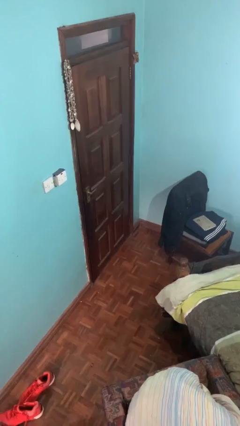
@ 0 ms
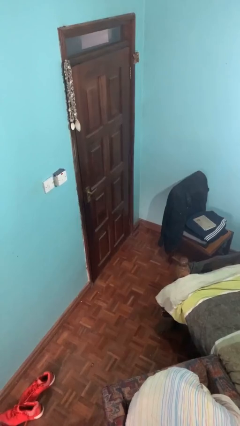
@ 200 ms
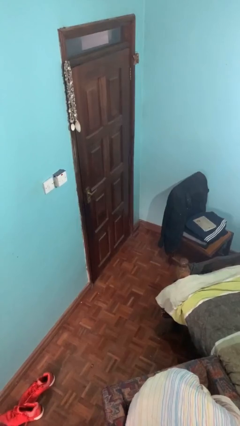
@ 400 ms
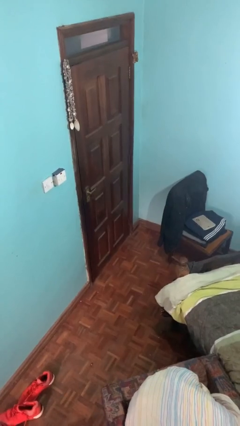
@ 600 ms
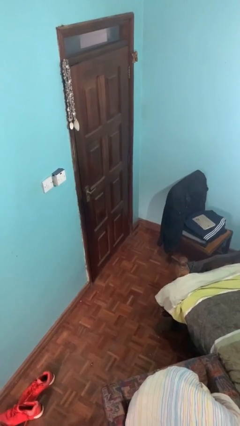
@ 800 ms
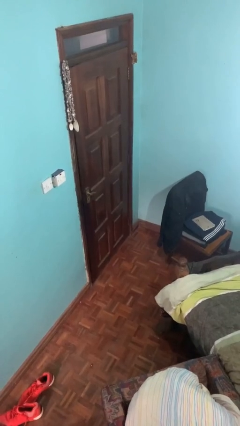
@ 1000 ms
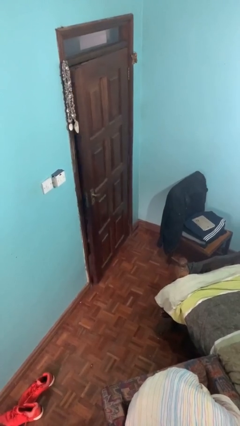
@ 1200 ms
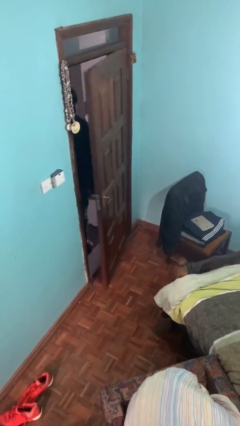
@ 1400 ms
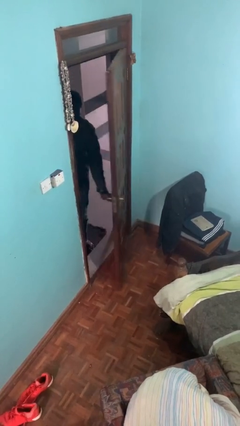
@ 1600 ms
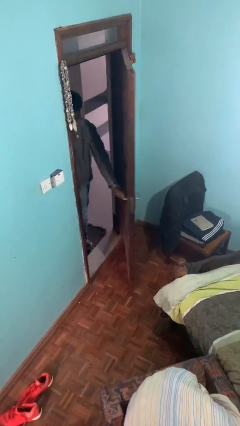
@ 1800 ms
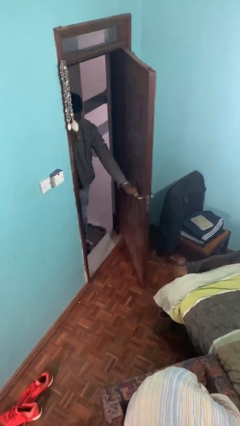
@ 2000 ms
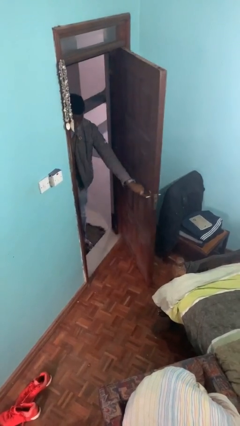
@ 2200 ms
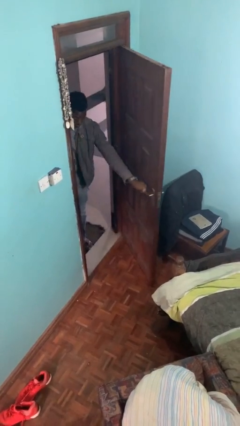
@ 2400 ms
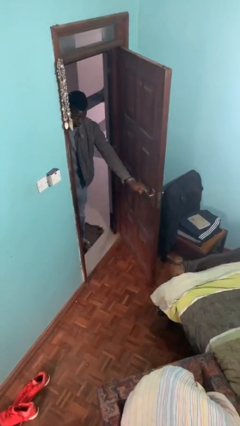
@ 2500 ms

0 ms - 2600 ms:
person opens facility door

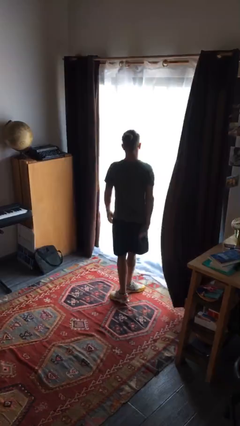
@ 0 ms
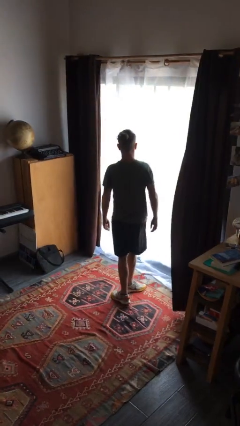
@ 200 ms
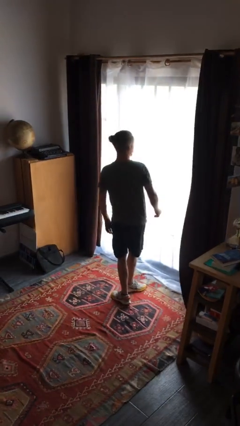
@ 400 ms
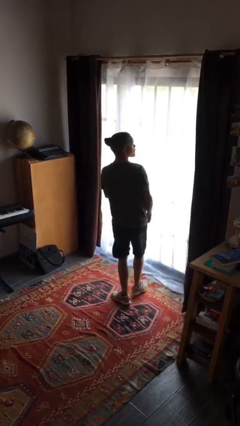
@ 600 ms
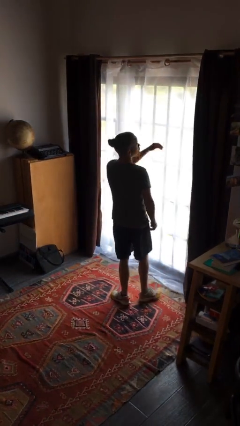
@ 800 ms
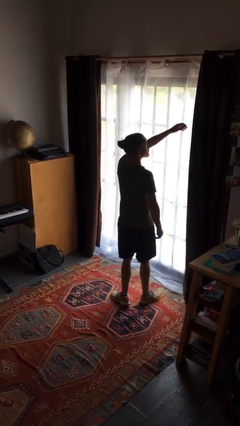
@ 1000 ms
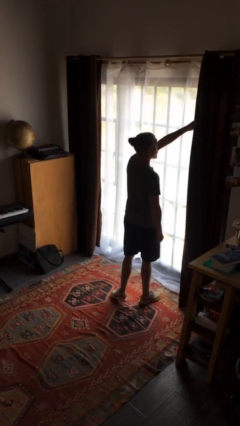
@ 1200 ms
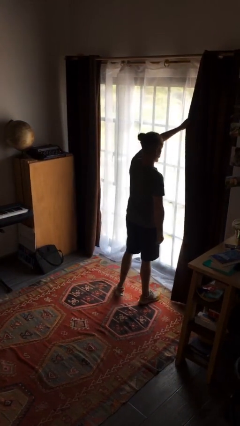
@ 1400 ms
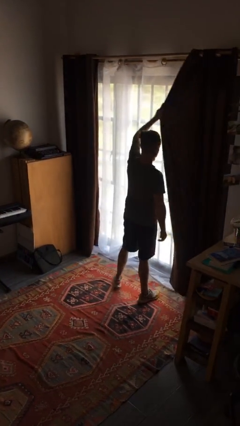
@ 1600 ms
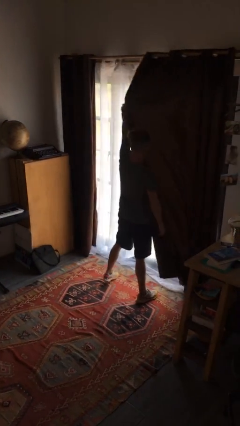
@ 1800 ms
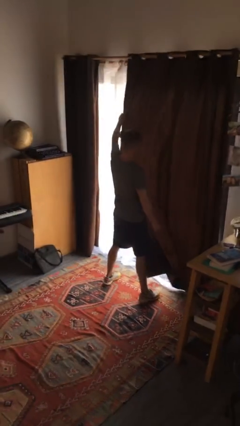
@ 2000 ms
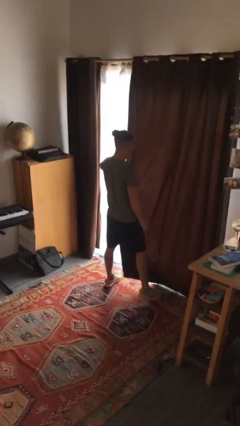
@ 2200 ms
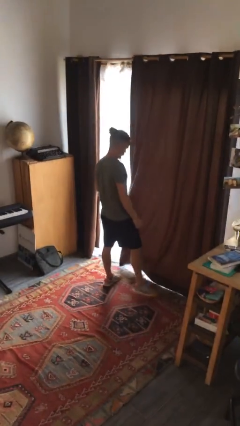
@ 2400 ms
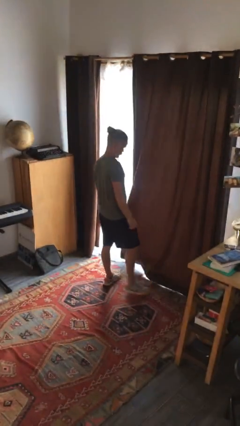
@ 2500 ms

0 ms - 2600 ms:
person closes curtains

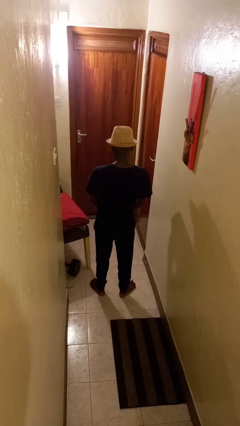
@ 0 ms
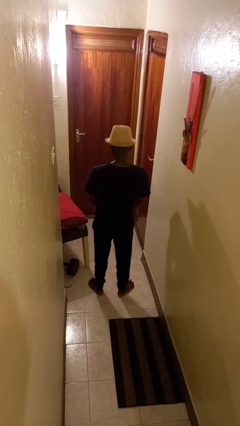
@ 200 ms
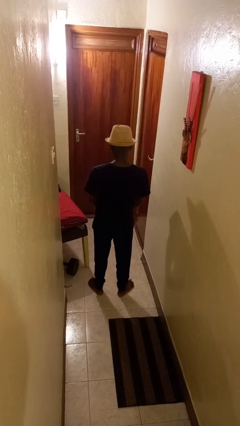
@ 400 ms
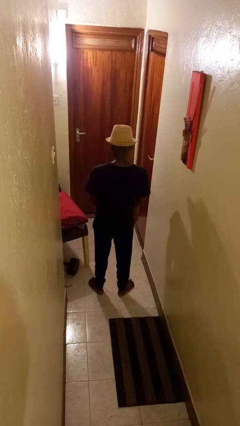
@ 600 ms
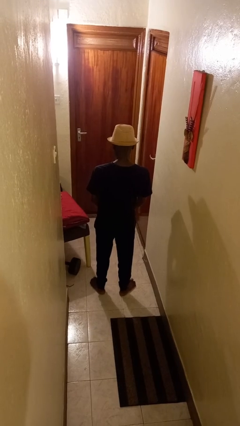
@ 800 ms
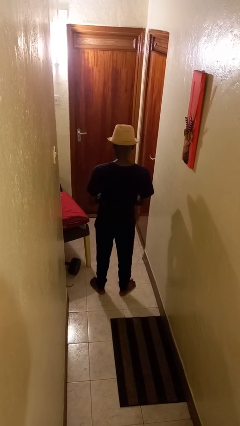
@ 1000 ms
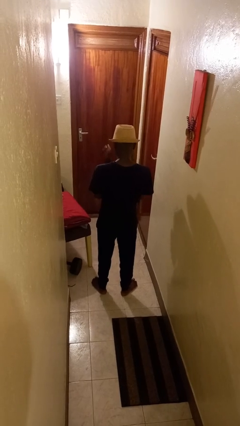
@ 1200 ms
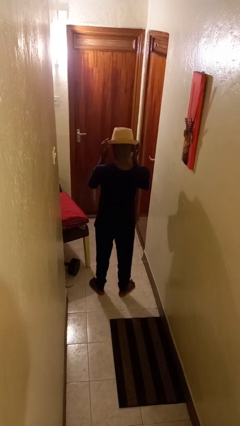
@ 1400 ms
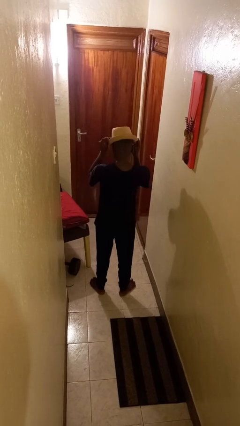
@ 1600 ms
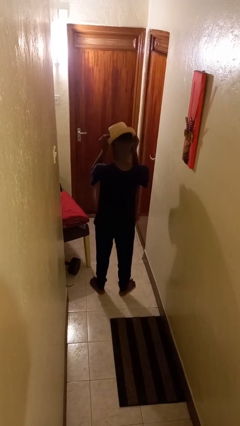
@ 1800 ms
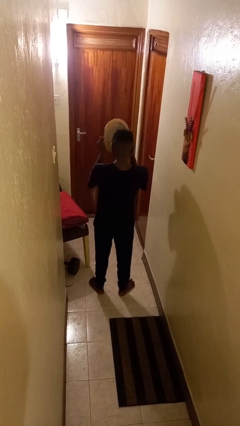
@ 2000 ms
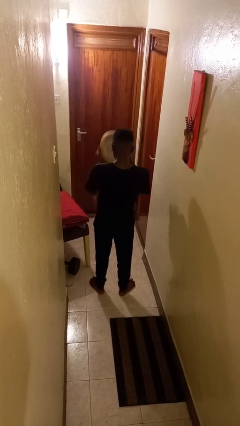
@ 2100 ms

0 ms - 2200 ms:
person takes off hat

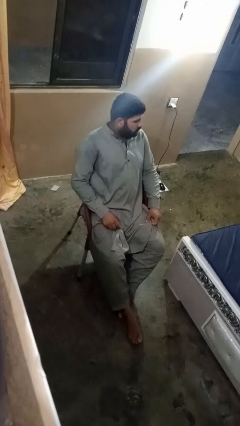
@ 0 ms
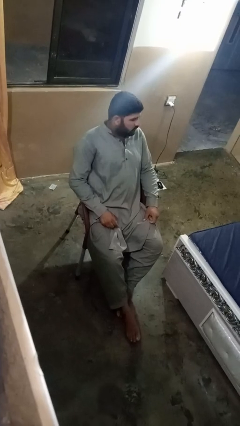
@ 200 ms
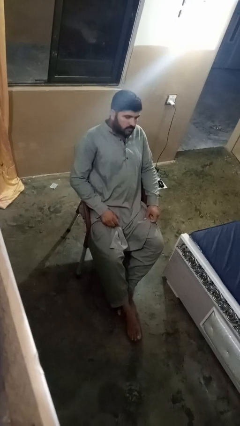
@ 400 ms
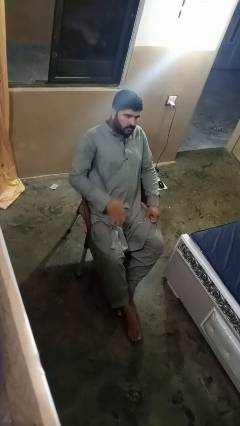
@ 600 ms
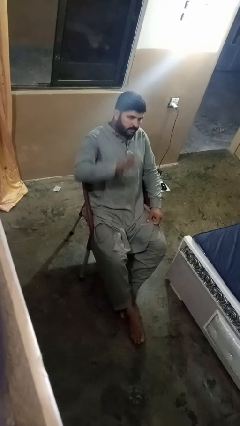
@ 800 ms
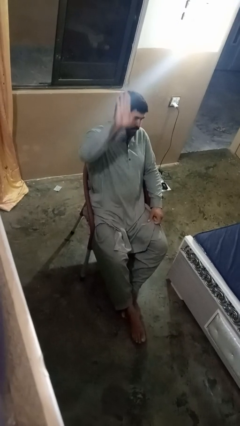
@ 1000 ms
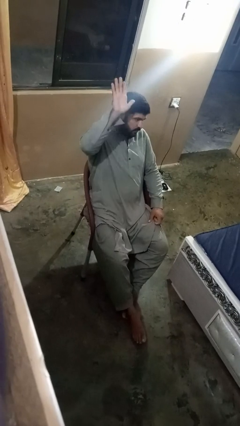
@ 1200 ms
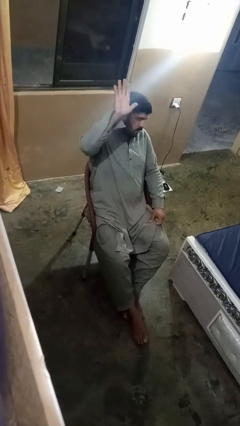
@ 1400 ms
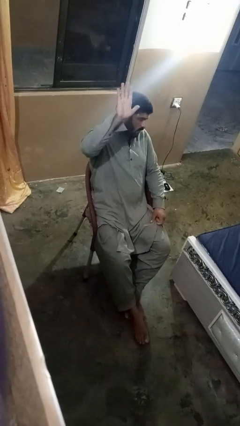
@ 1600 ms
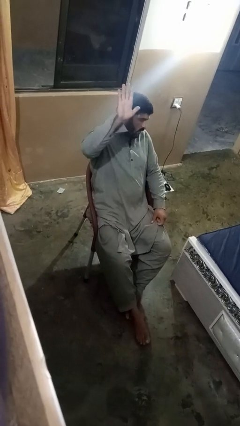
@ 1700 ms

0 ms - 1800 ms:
person gestures number five

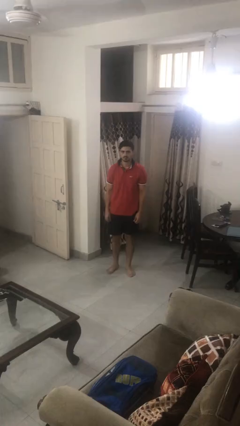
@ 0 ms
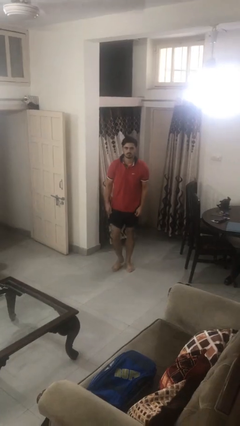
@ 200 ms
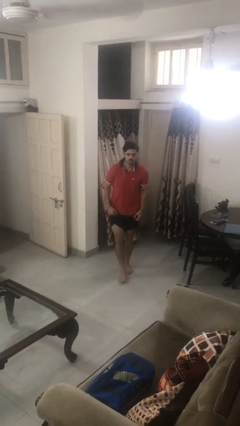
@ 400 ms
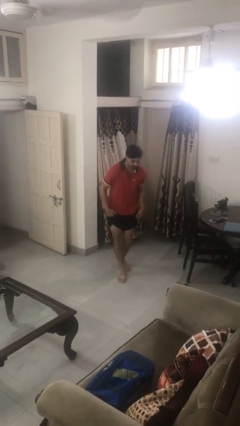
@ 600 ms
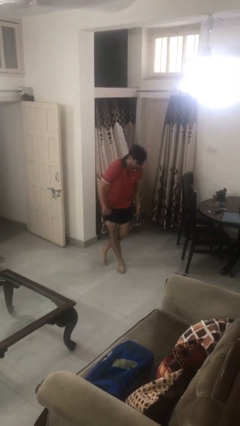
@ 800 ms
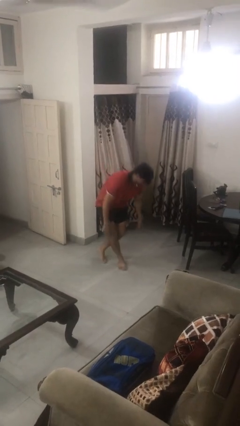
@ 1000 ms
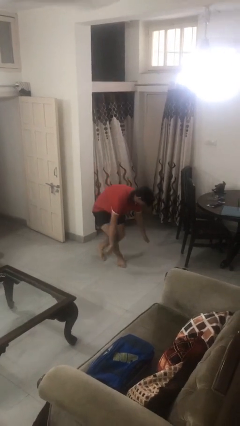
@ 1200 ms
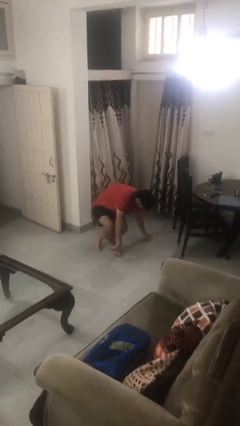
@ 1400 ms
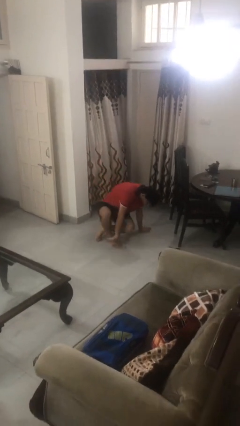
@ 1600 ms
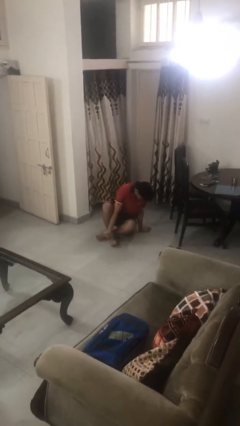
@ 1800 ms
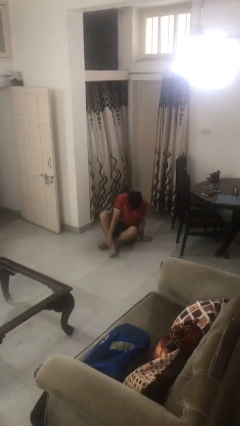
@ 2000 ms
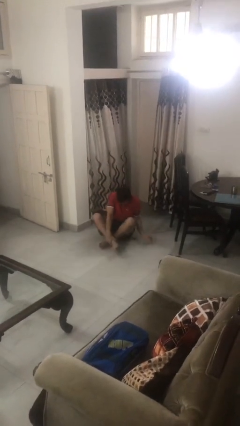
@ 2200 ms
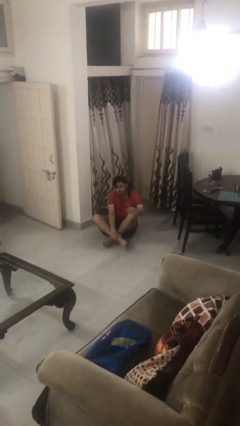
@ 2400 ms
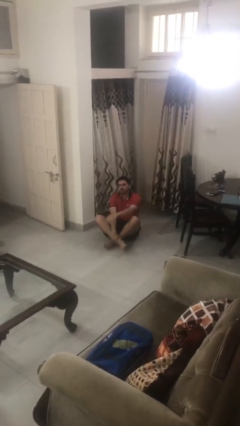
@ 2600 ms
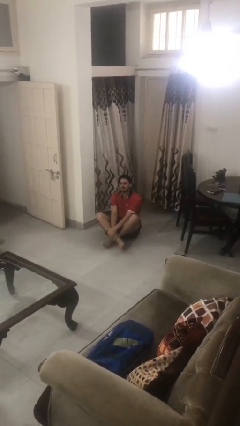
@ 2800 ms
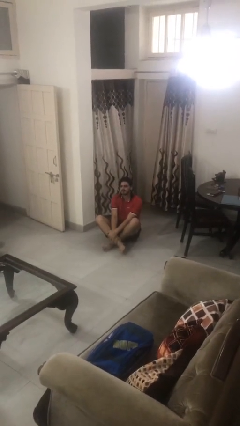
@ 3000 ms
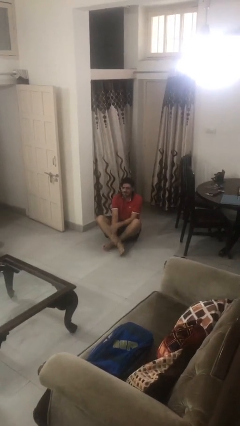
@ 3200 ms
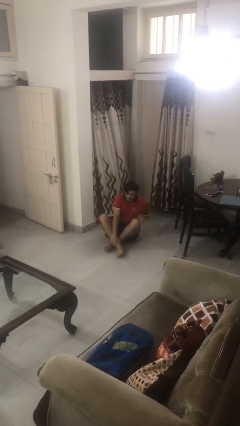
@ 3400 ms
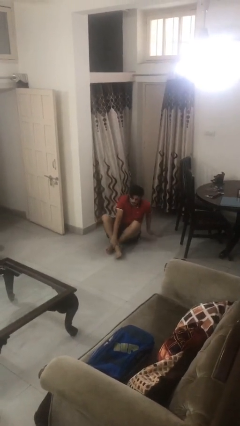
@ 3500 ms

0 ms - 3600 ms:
person sits crisscross

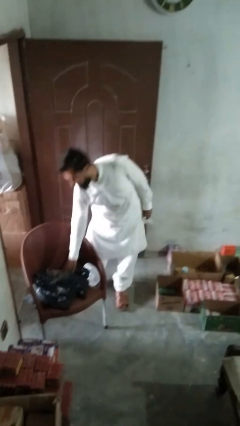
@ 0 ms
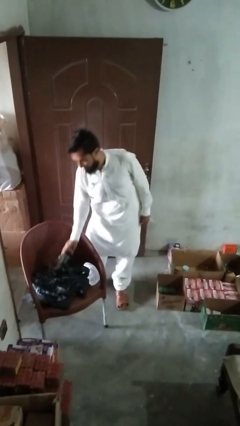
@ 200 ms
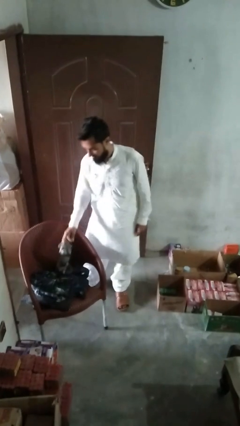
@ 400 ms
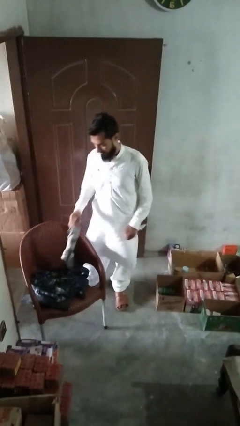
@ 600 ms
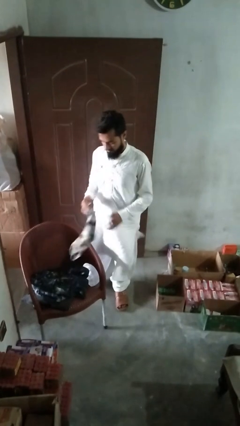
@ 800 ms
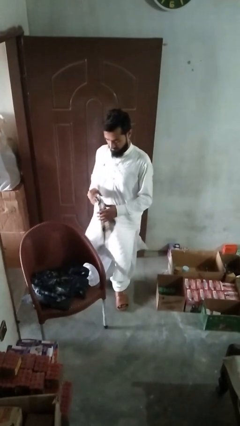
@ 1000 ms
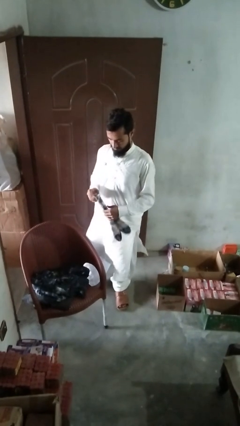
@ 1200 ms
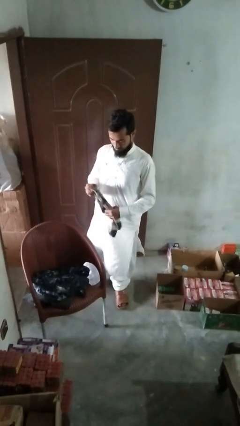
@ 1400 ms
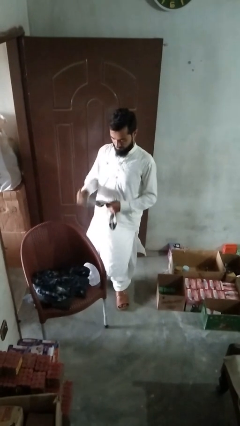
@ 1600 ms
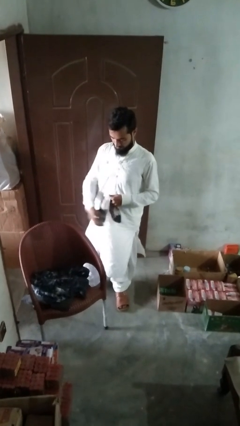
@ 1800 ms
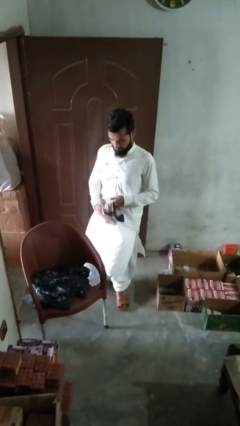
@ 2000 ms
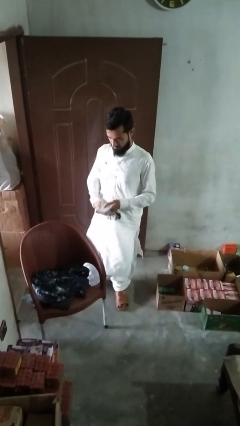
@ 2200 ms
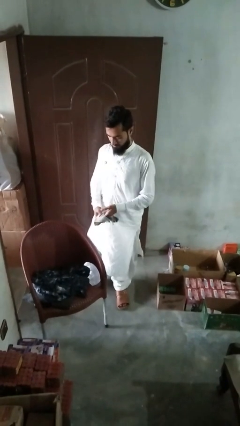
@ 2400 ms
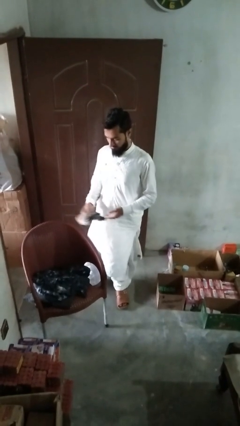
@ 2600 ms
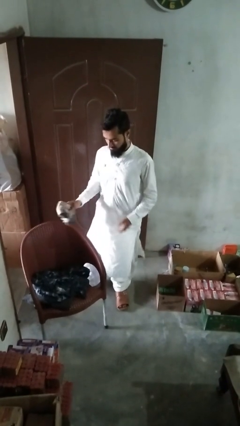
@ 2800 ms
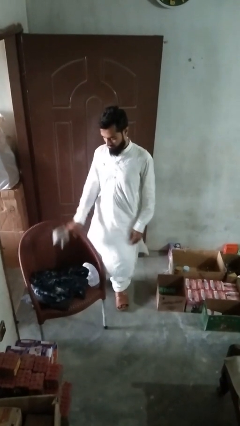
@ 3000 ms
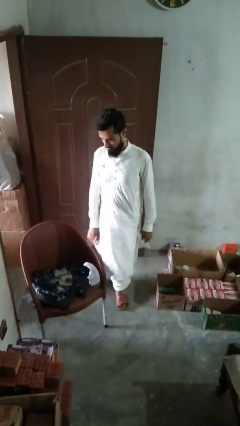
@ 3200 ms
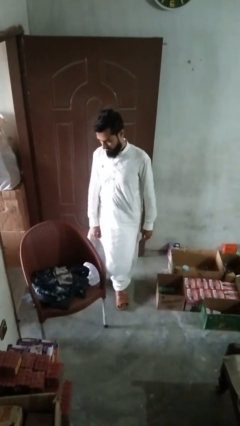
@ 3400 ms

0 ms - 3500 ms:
person folds socks

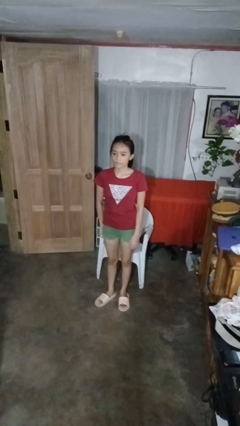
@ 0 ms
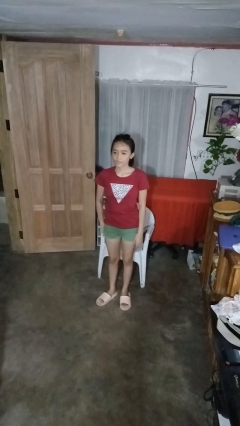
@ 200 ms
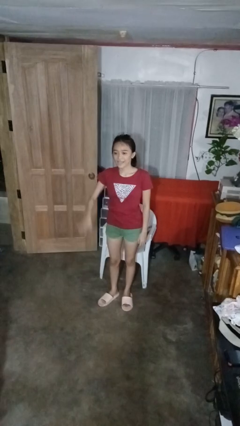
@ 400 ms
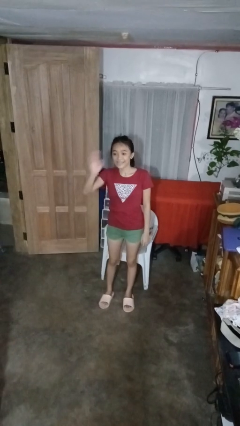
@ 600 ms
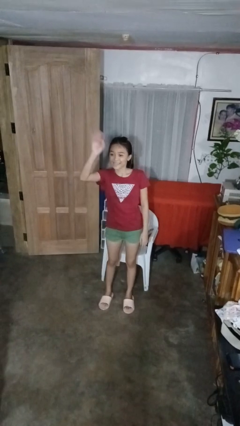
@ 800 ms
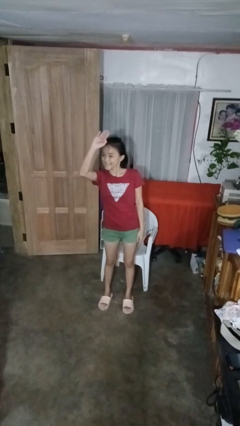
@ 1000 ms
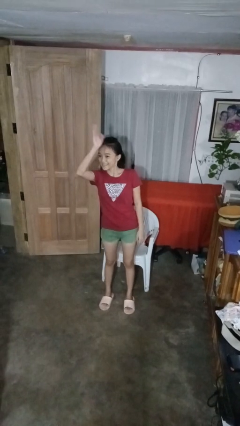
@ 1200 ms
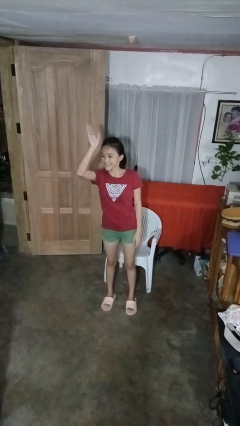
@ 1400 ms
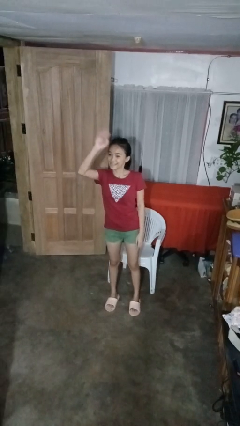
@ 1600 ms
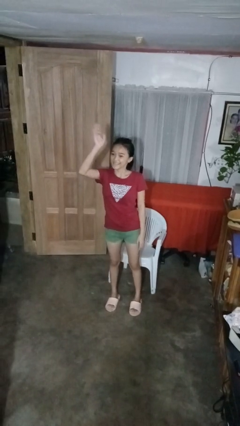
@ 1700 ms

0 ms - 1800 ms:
person waves at person
